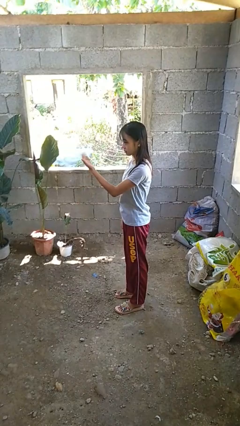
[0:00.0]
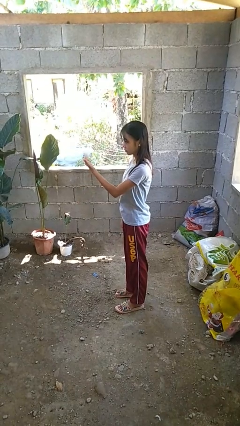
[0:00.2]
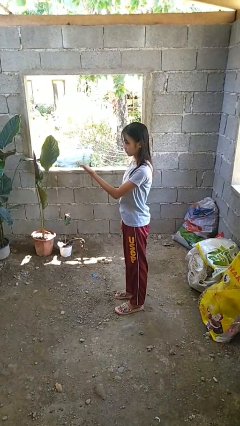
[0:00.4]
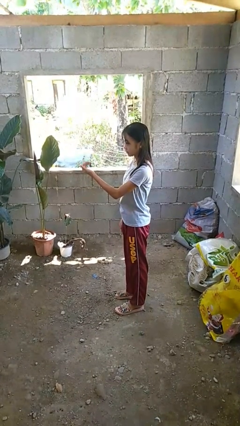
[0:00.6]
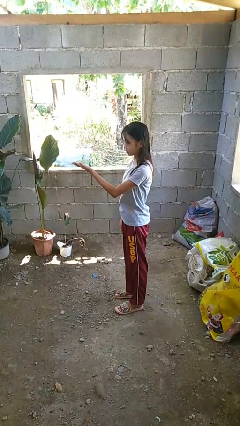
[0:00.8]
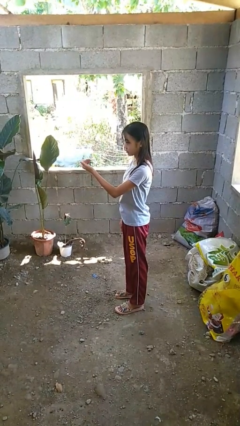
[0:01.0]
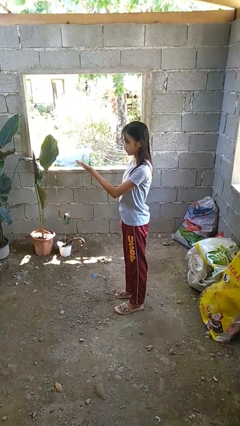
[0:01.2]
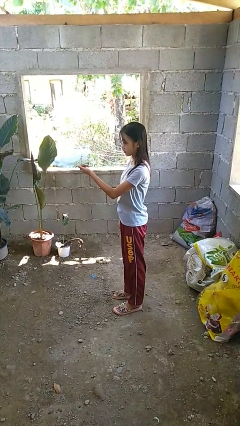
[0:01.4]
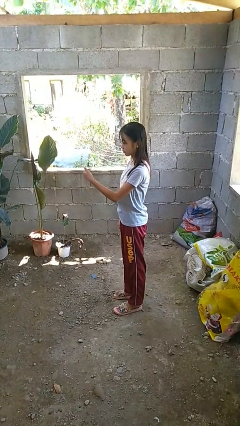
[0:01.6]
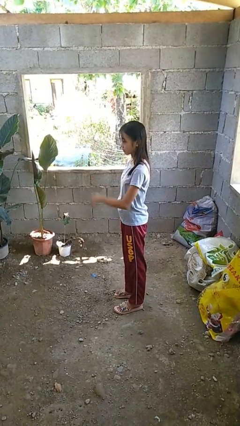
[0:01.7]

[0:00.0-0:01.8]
person gestures come here

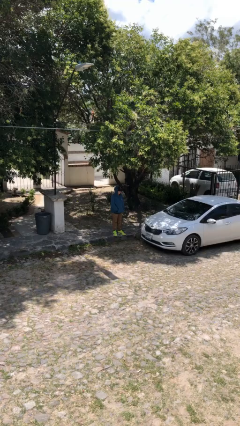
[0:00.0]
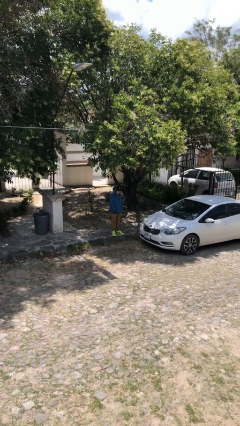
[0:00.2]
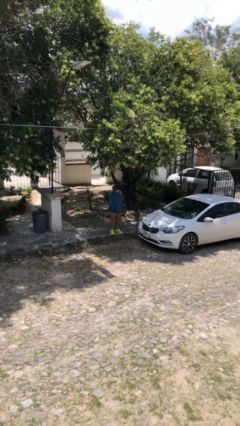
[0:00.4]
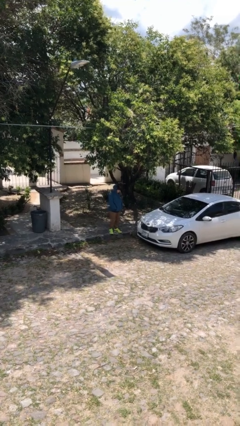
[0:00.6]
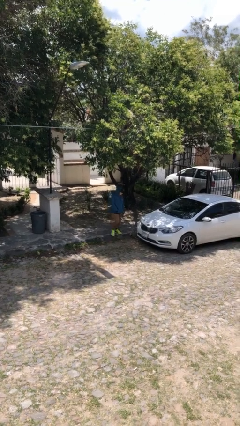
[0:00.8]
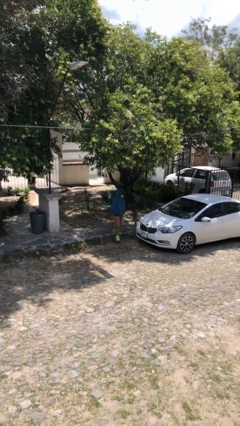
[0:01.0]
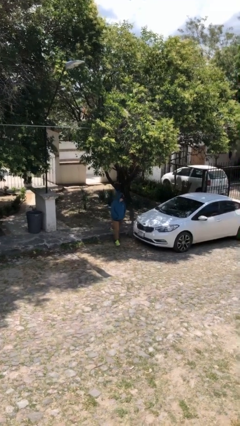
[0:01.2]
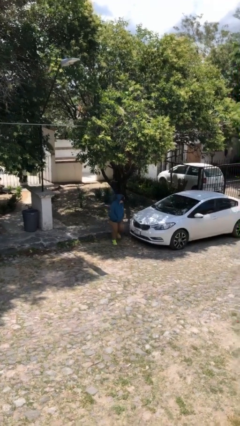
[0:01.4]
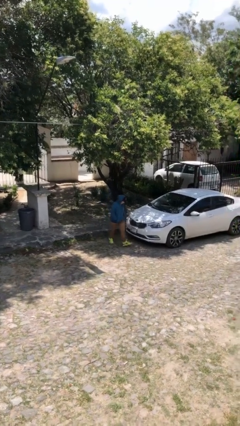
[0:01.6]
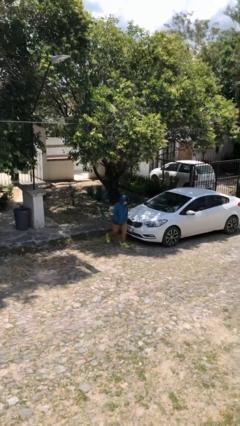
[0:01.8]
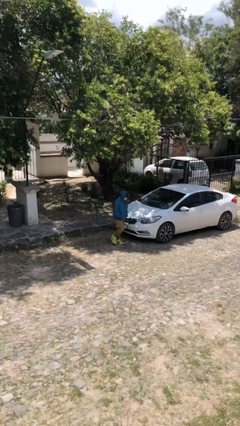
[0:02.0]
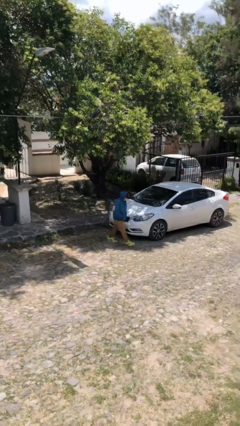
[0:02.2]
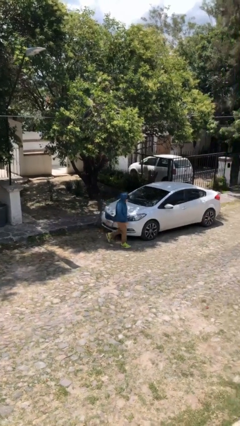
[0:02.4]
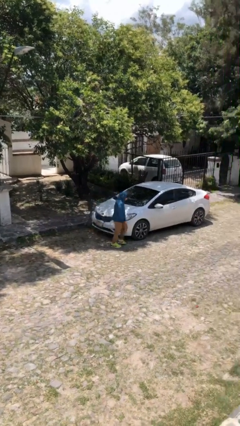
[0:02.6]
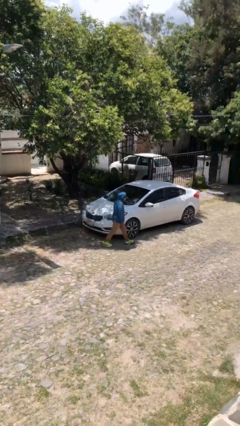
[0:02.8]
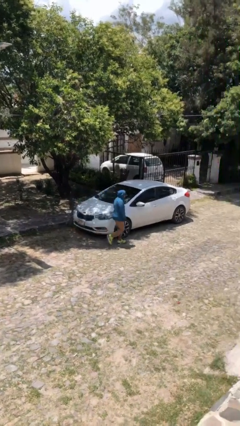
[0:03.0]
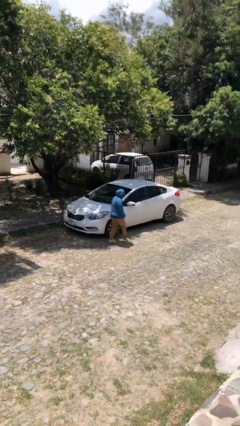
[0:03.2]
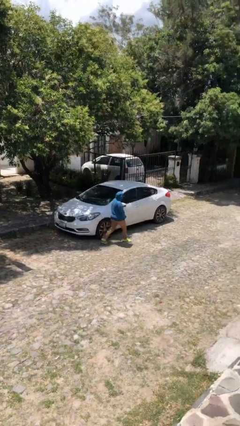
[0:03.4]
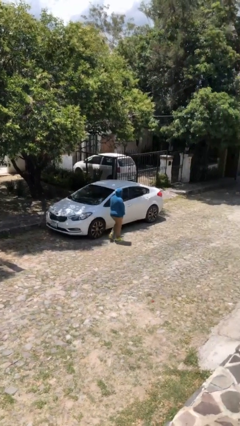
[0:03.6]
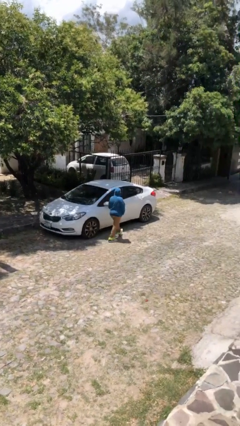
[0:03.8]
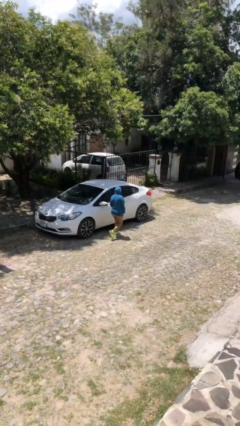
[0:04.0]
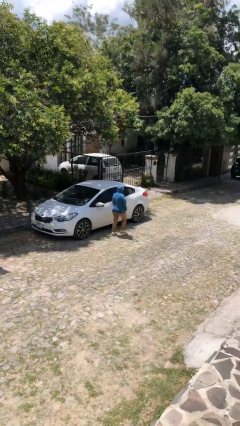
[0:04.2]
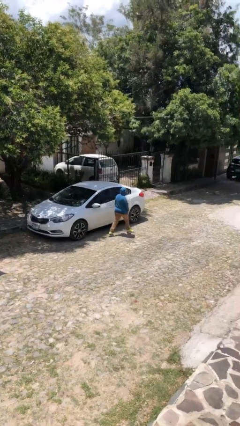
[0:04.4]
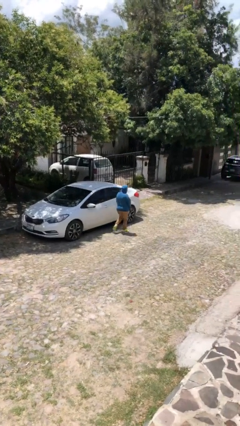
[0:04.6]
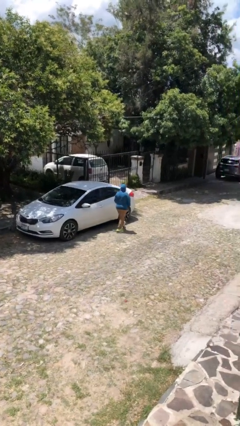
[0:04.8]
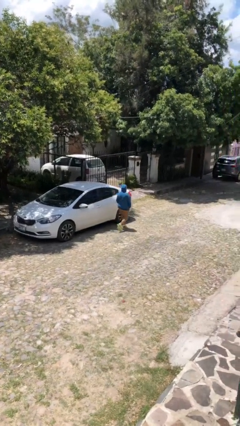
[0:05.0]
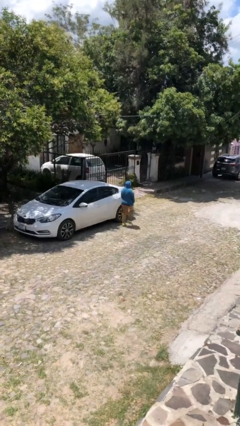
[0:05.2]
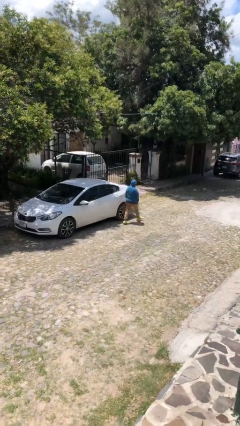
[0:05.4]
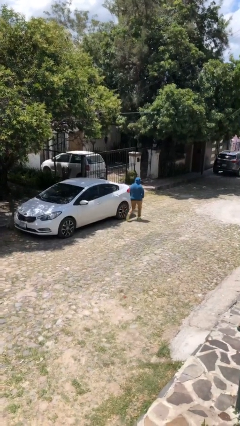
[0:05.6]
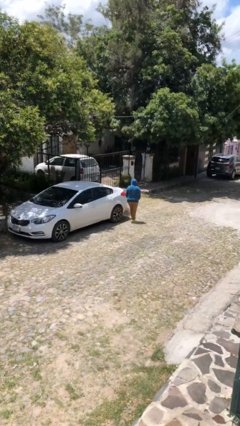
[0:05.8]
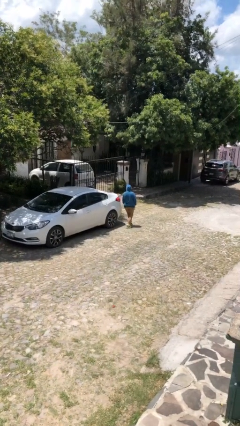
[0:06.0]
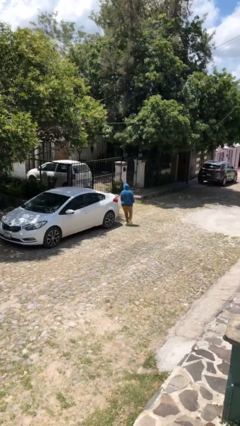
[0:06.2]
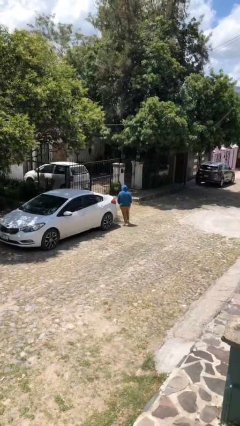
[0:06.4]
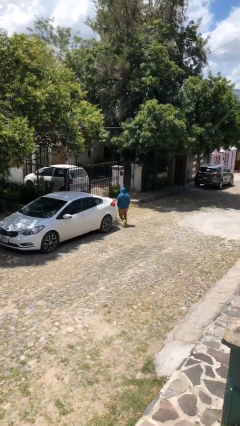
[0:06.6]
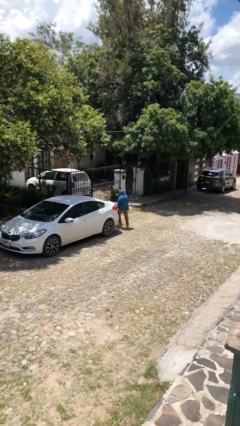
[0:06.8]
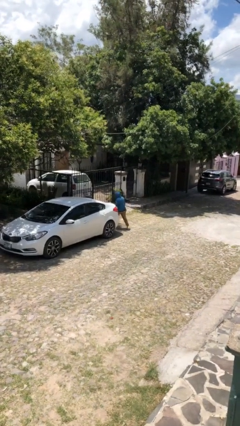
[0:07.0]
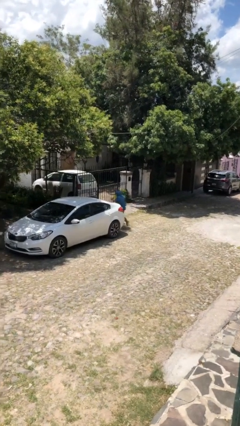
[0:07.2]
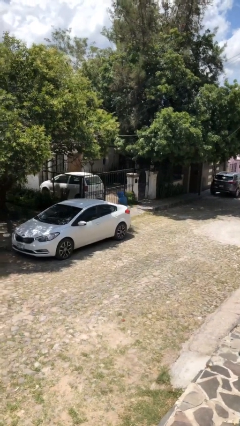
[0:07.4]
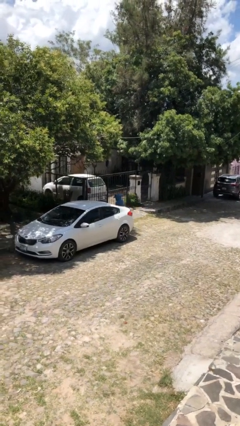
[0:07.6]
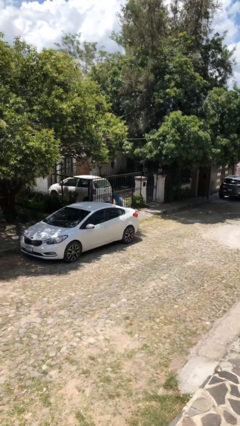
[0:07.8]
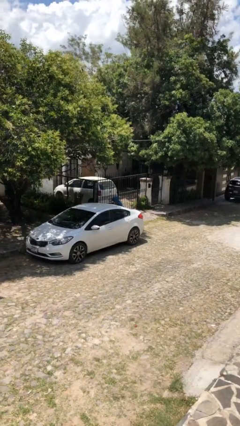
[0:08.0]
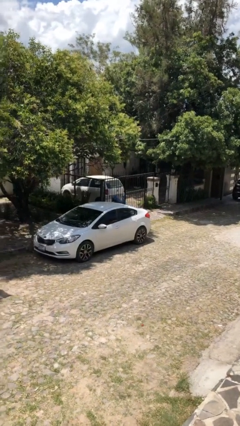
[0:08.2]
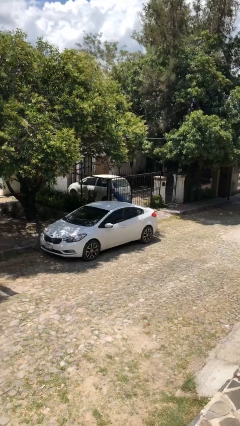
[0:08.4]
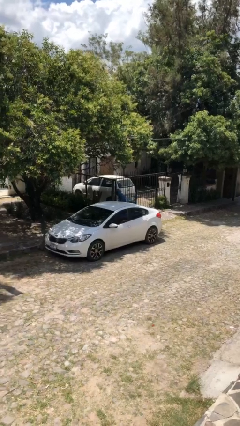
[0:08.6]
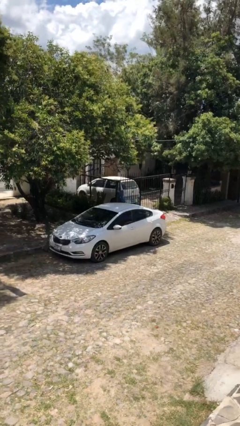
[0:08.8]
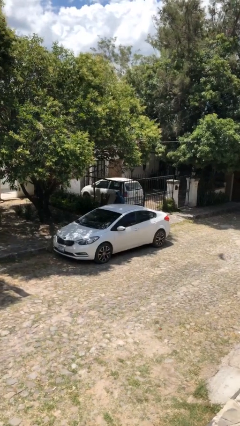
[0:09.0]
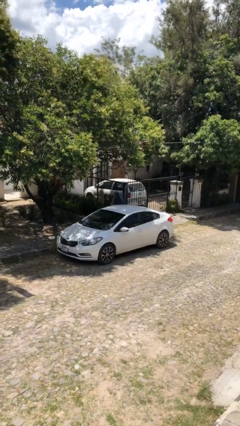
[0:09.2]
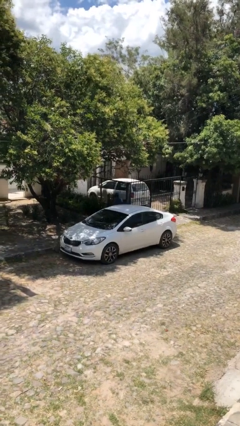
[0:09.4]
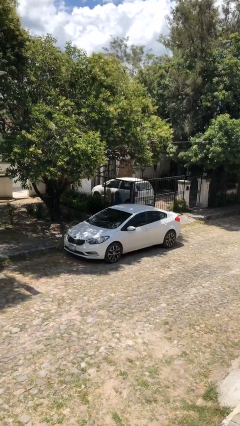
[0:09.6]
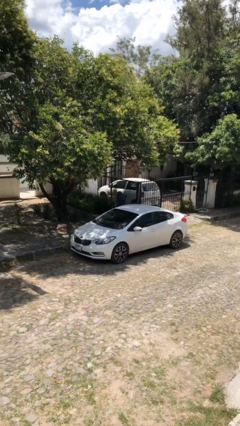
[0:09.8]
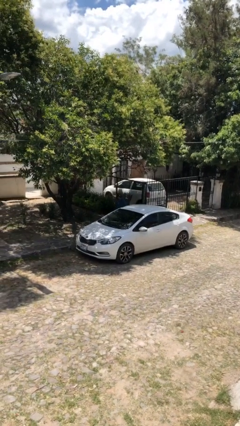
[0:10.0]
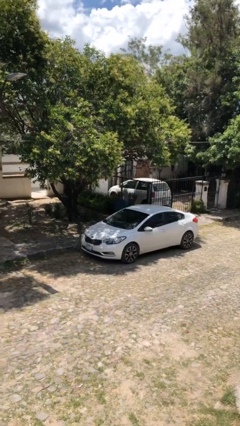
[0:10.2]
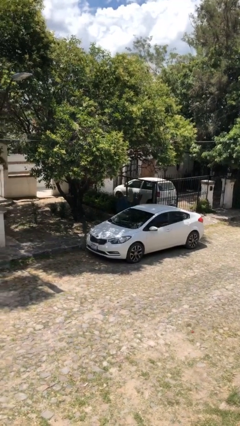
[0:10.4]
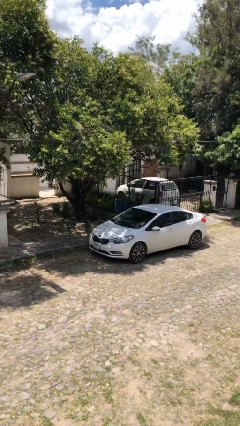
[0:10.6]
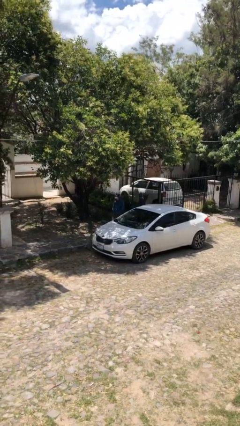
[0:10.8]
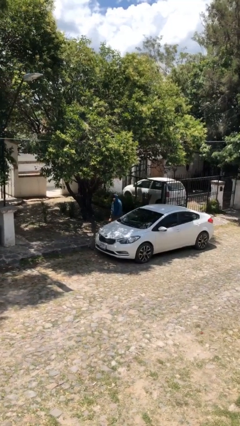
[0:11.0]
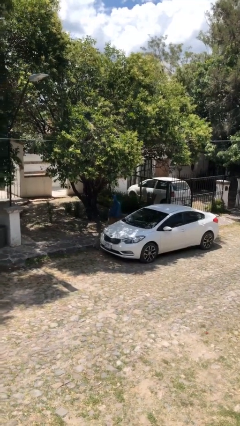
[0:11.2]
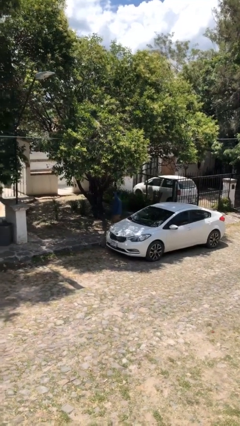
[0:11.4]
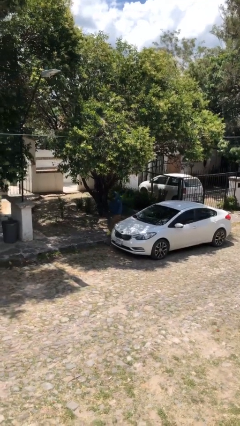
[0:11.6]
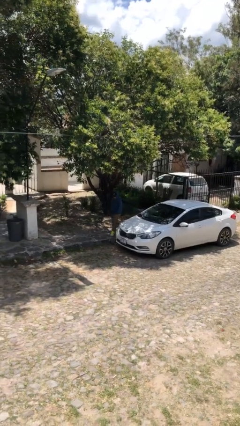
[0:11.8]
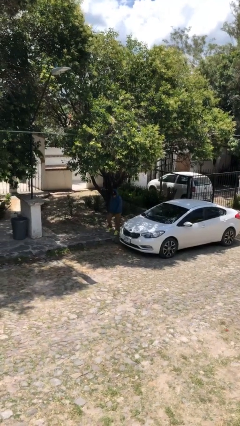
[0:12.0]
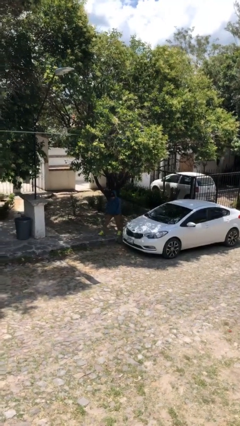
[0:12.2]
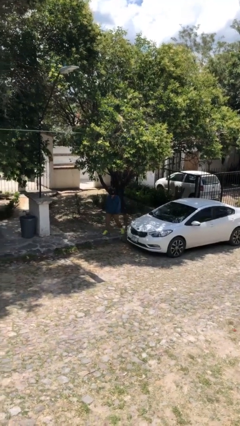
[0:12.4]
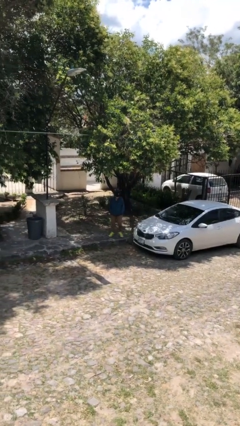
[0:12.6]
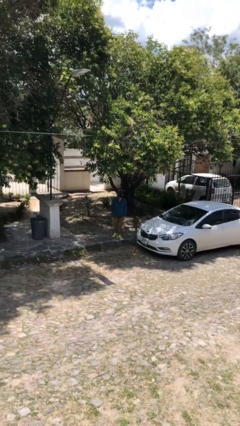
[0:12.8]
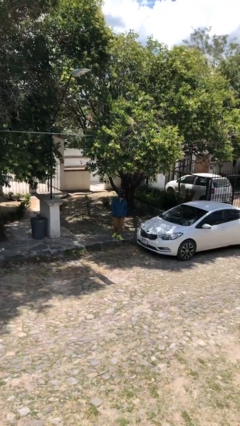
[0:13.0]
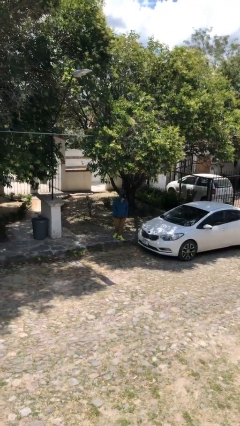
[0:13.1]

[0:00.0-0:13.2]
person walks around car

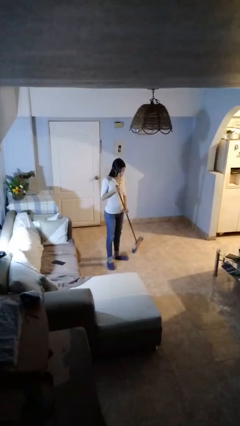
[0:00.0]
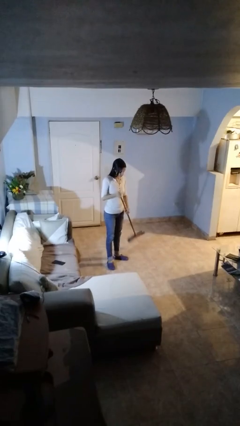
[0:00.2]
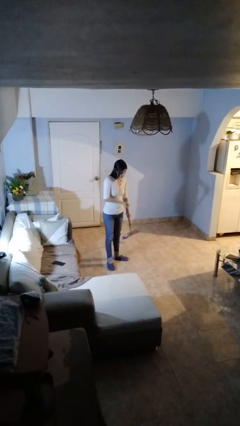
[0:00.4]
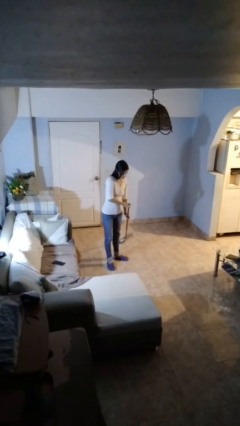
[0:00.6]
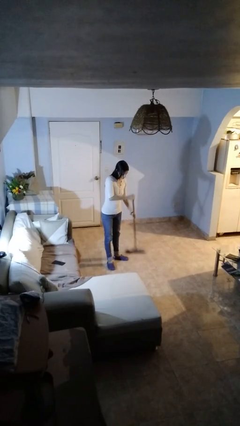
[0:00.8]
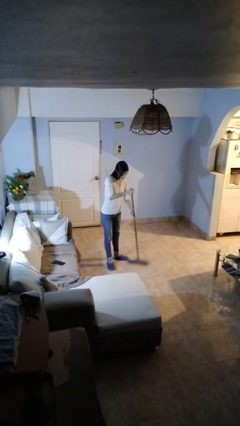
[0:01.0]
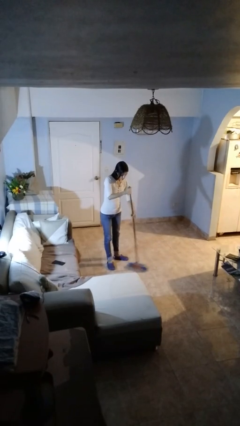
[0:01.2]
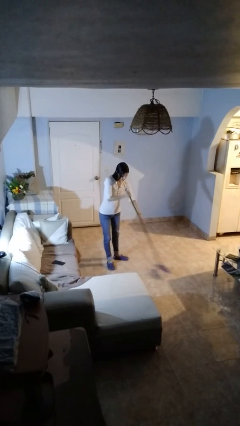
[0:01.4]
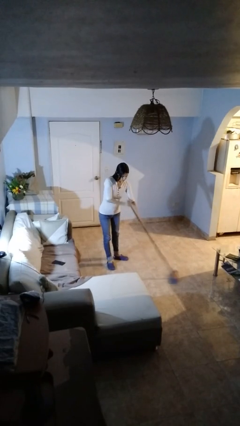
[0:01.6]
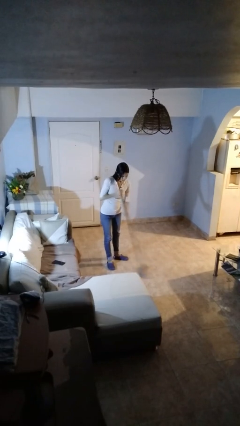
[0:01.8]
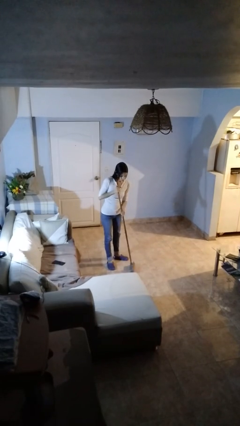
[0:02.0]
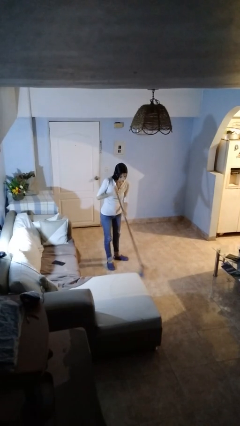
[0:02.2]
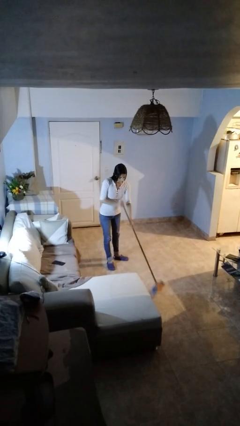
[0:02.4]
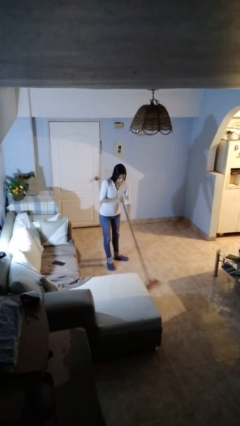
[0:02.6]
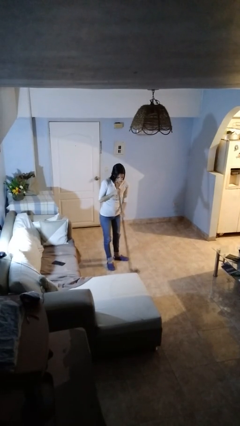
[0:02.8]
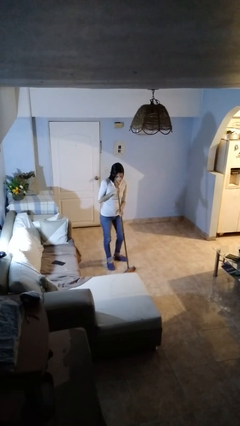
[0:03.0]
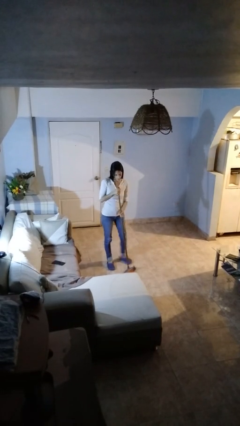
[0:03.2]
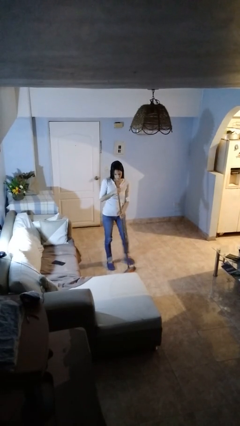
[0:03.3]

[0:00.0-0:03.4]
person sweeps floor
